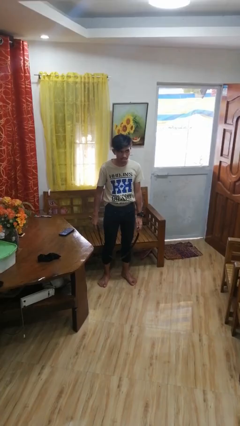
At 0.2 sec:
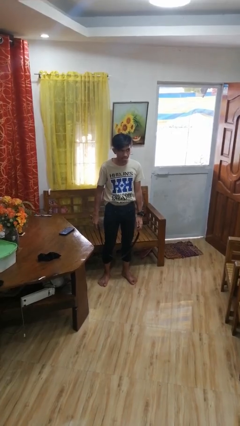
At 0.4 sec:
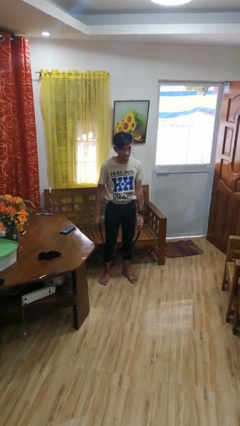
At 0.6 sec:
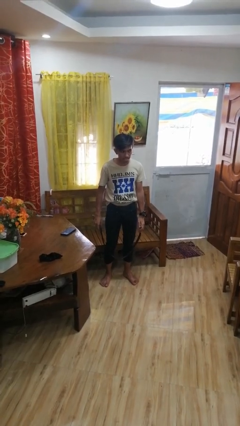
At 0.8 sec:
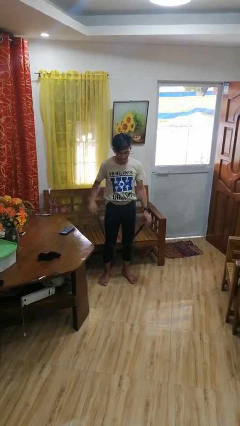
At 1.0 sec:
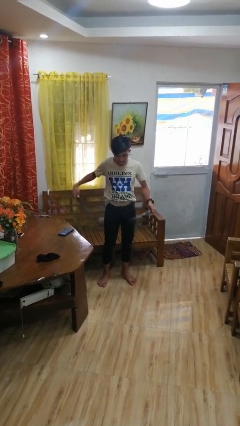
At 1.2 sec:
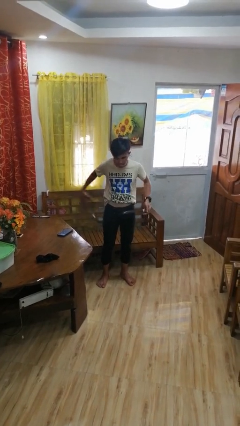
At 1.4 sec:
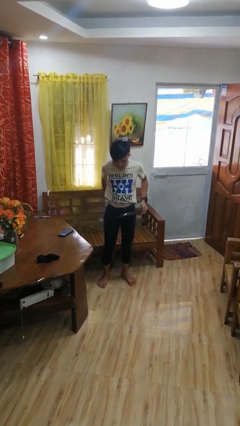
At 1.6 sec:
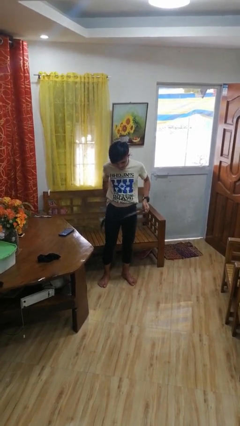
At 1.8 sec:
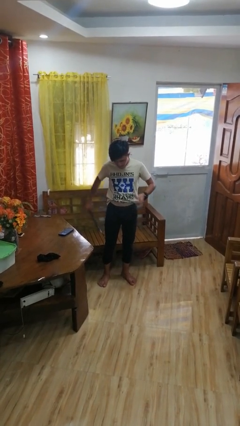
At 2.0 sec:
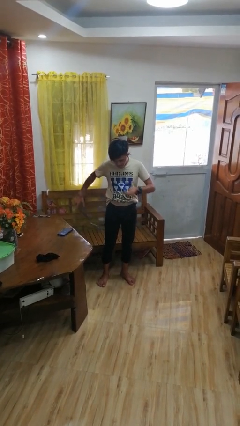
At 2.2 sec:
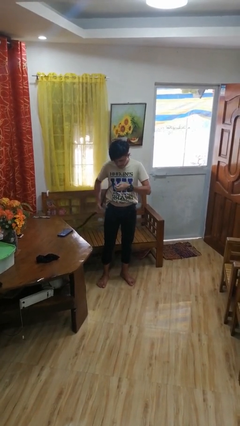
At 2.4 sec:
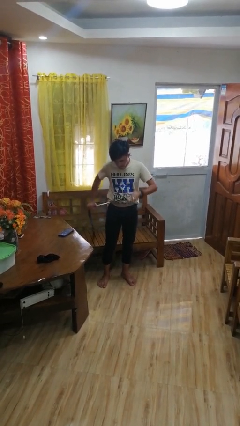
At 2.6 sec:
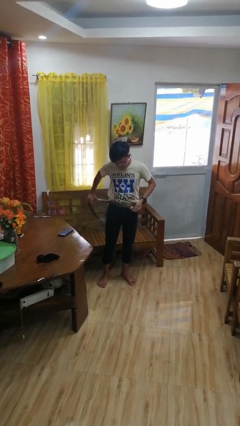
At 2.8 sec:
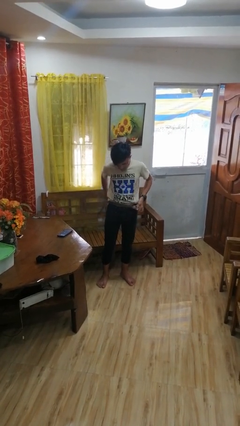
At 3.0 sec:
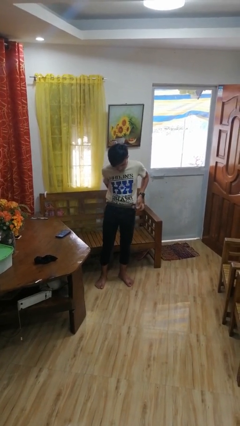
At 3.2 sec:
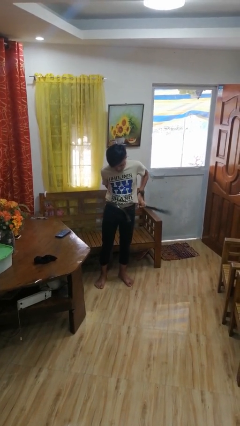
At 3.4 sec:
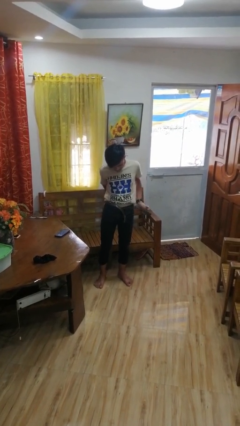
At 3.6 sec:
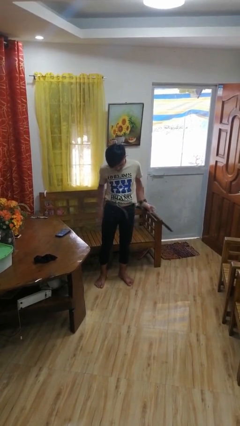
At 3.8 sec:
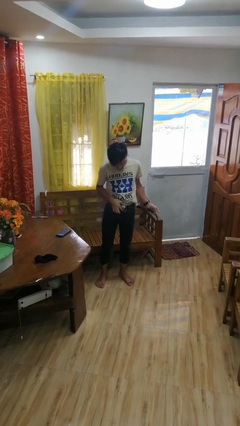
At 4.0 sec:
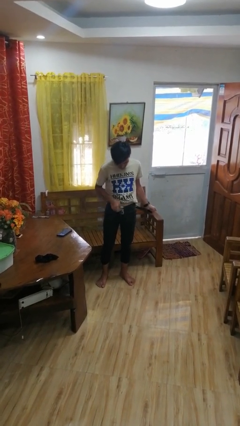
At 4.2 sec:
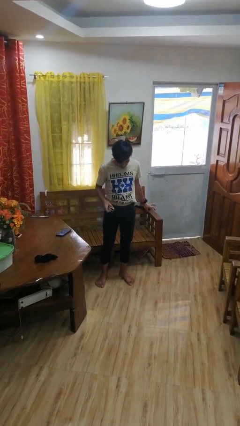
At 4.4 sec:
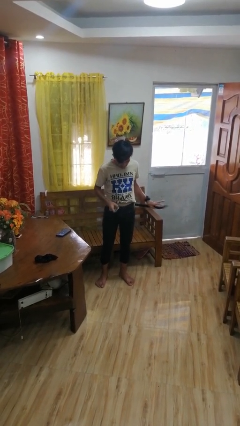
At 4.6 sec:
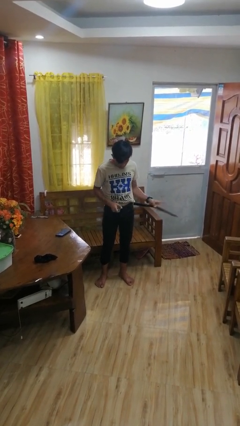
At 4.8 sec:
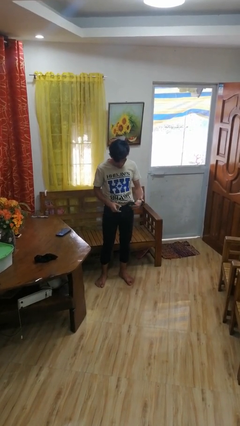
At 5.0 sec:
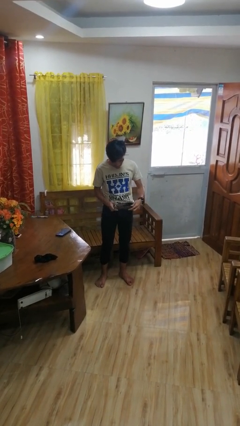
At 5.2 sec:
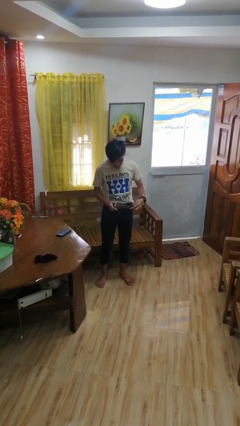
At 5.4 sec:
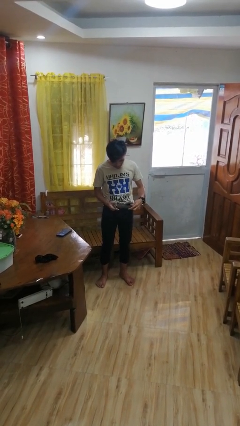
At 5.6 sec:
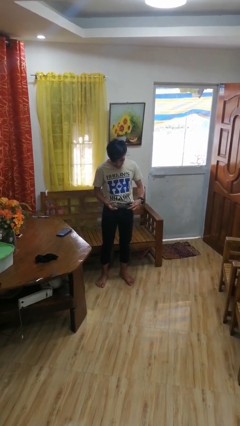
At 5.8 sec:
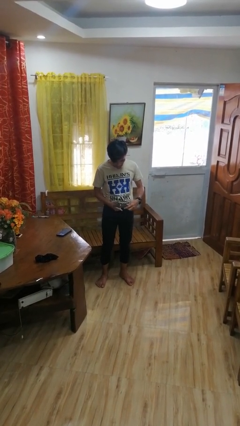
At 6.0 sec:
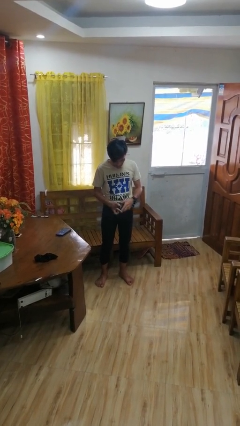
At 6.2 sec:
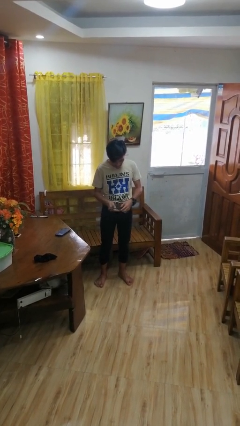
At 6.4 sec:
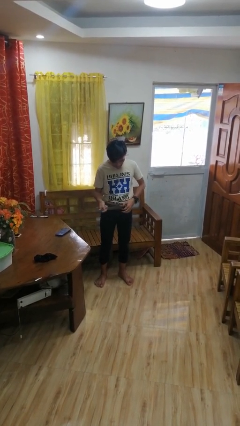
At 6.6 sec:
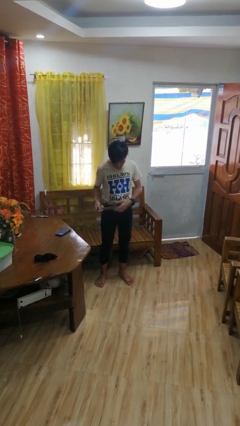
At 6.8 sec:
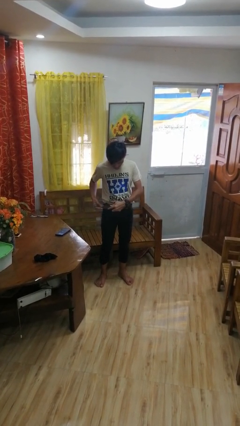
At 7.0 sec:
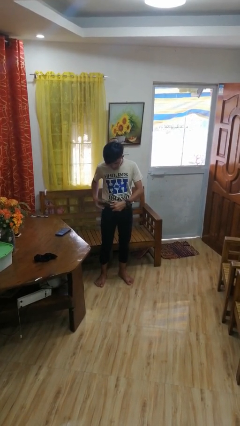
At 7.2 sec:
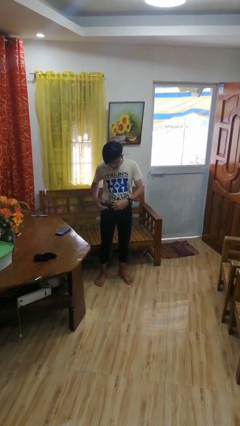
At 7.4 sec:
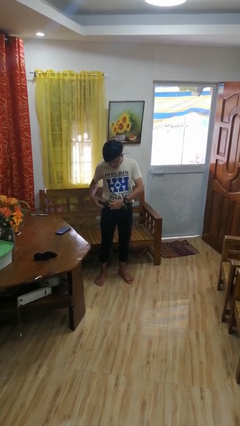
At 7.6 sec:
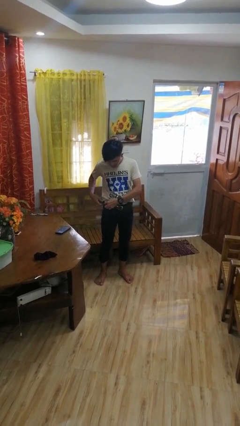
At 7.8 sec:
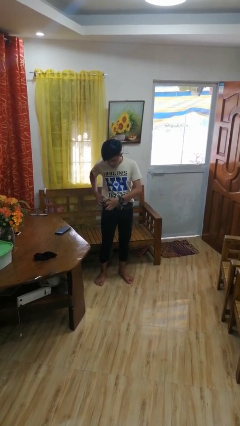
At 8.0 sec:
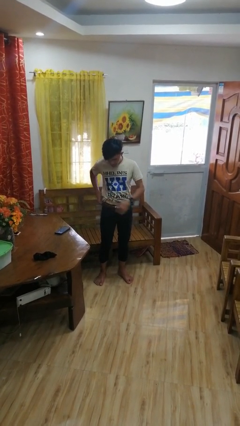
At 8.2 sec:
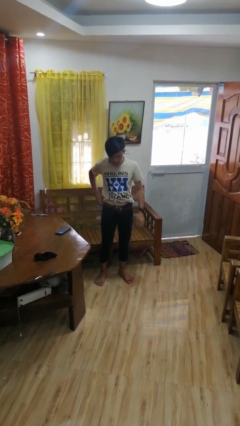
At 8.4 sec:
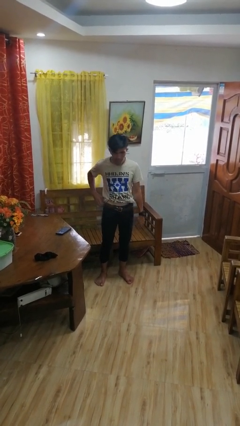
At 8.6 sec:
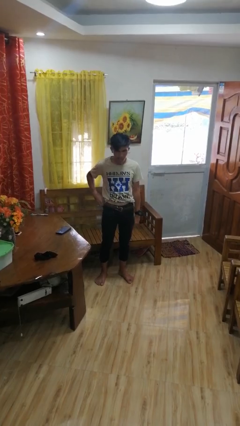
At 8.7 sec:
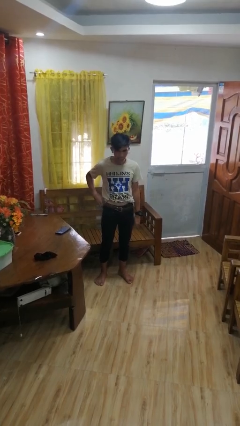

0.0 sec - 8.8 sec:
person puts on belt

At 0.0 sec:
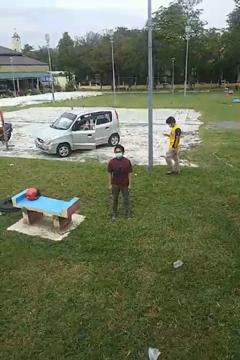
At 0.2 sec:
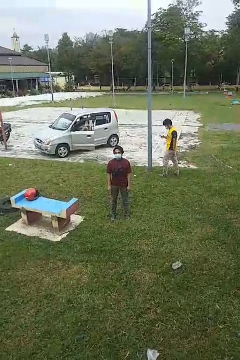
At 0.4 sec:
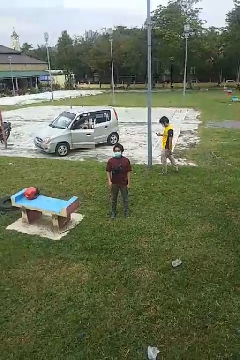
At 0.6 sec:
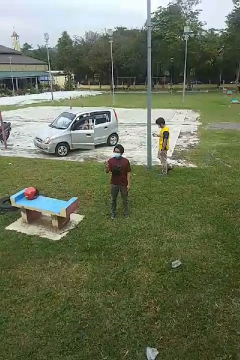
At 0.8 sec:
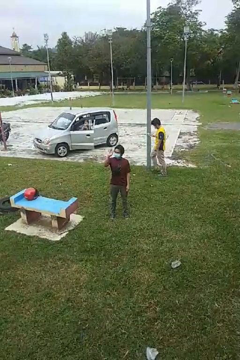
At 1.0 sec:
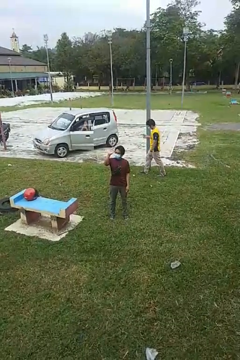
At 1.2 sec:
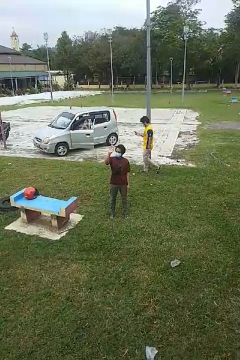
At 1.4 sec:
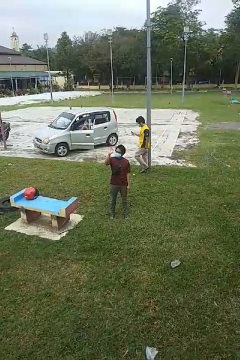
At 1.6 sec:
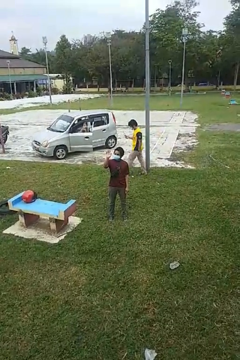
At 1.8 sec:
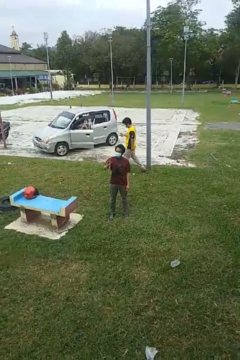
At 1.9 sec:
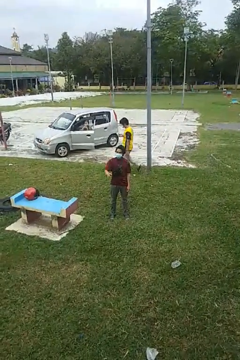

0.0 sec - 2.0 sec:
person waves at person

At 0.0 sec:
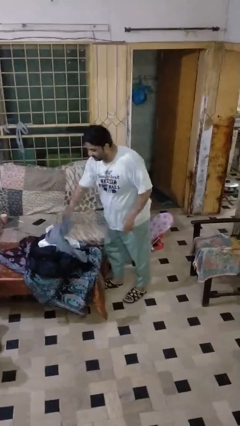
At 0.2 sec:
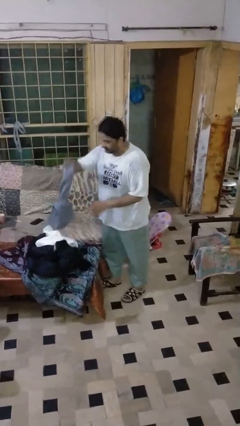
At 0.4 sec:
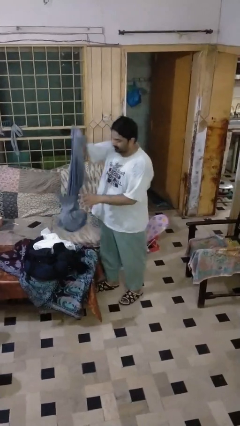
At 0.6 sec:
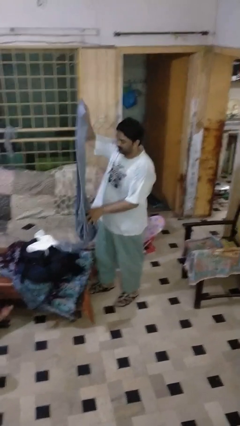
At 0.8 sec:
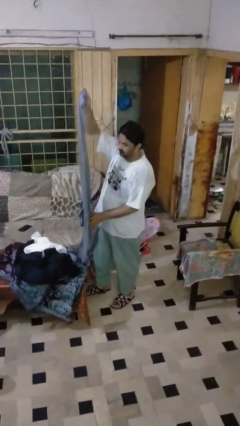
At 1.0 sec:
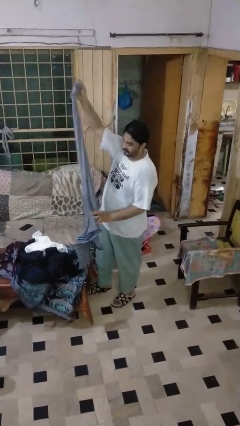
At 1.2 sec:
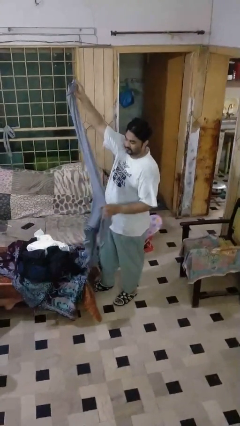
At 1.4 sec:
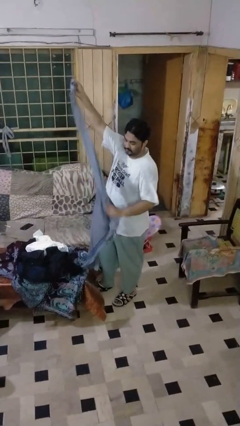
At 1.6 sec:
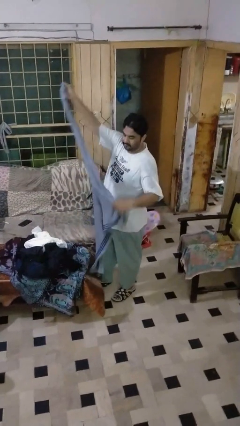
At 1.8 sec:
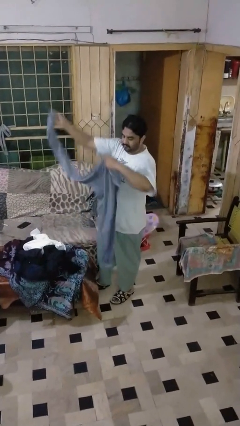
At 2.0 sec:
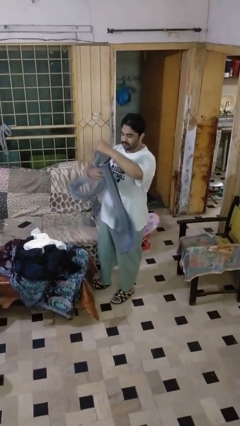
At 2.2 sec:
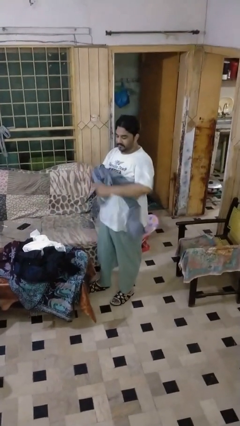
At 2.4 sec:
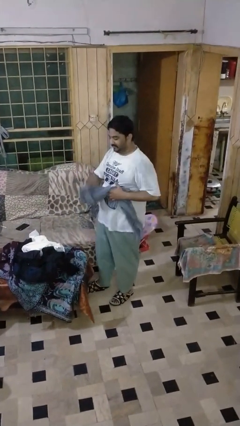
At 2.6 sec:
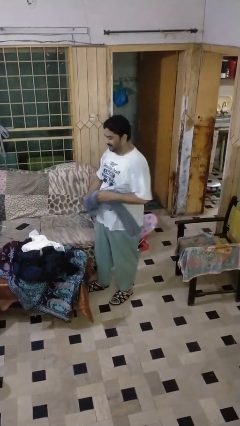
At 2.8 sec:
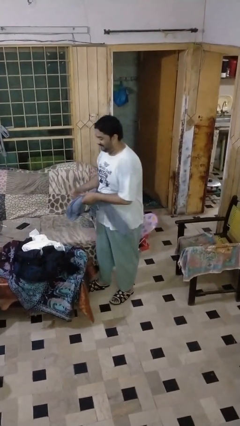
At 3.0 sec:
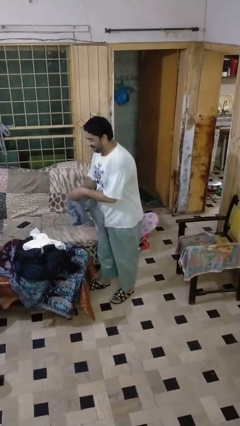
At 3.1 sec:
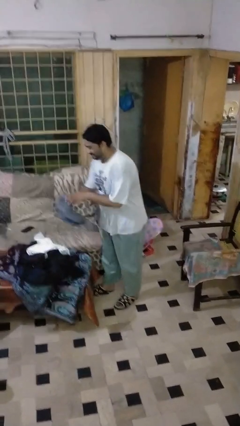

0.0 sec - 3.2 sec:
person folds pants

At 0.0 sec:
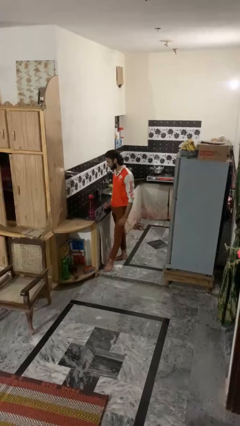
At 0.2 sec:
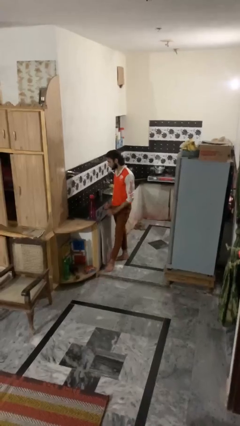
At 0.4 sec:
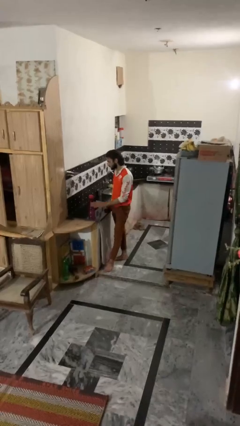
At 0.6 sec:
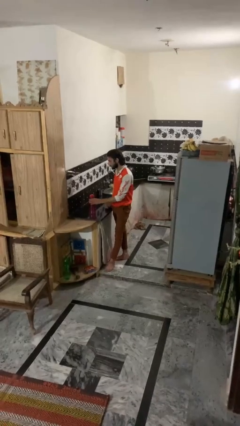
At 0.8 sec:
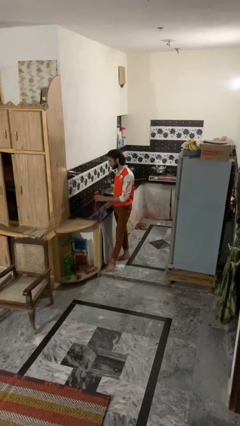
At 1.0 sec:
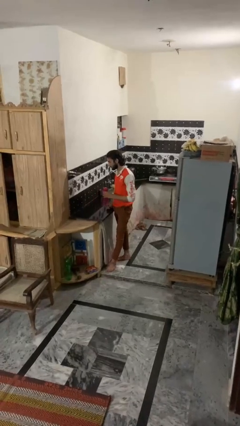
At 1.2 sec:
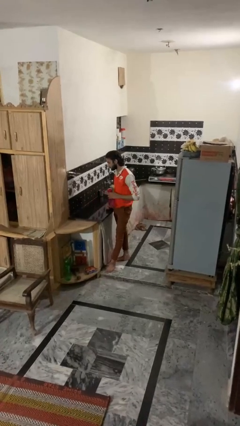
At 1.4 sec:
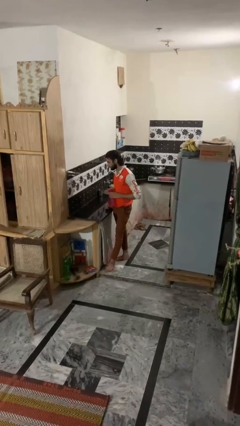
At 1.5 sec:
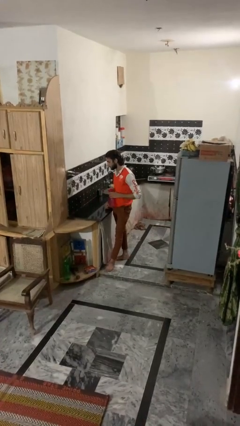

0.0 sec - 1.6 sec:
person picks up object from countertop

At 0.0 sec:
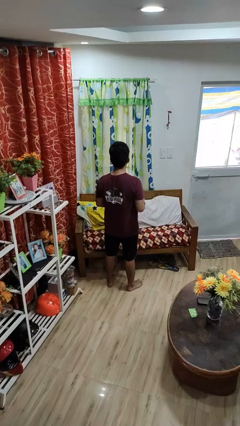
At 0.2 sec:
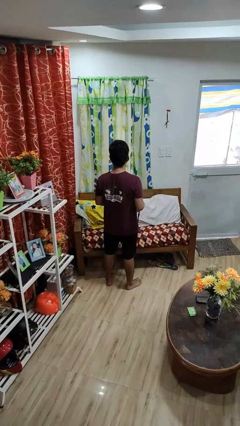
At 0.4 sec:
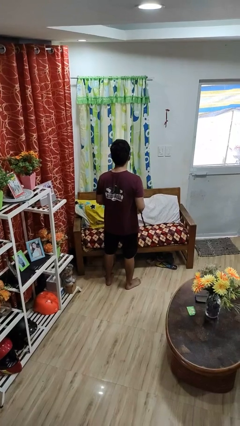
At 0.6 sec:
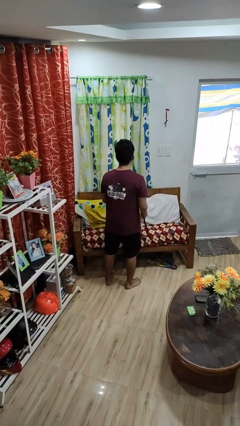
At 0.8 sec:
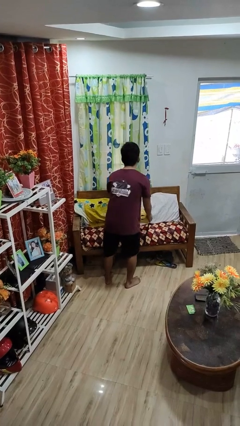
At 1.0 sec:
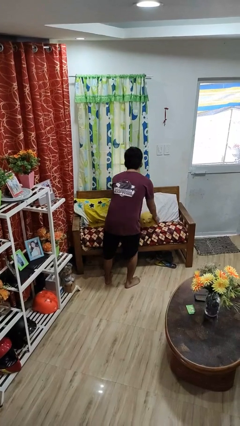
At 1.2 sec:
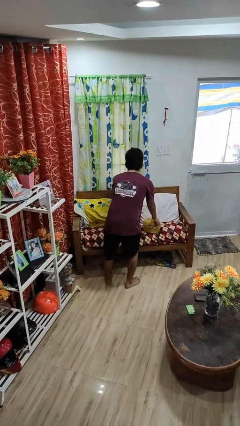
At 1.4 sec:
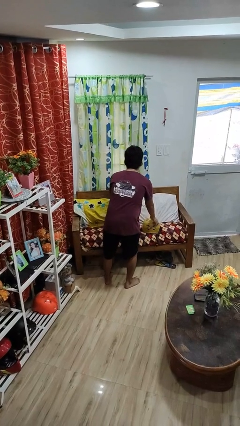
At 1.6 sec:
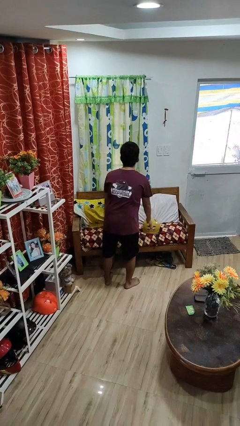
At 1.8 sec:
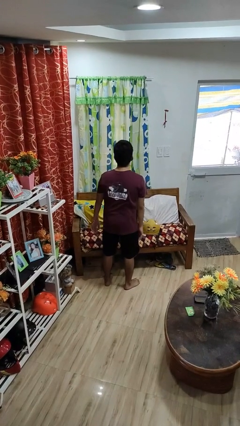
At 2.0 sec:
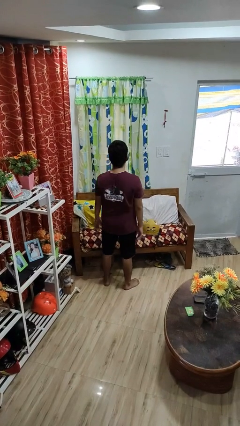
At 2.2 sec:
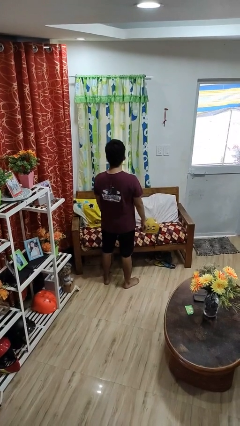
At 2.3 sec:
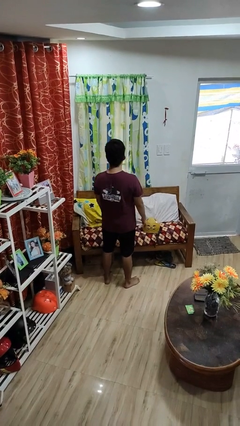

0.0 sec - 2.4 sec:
person puts down object on couch
